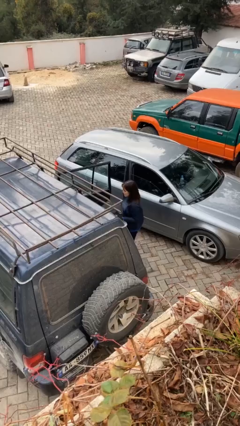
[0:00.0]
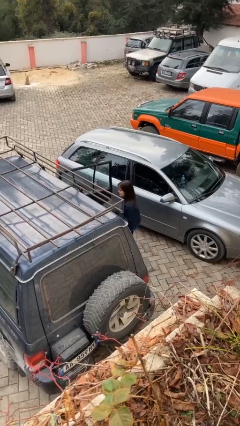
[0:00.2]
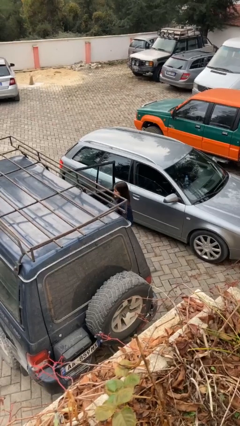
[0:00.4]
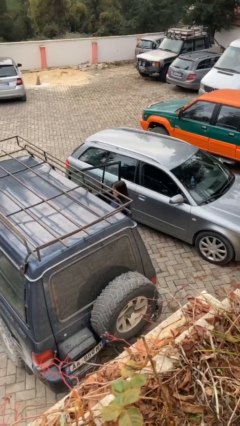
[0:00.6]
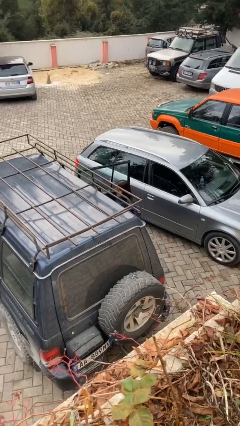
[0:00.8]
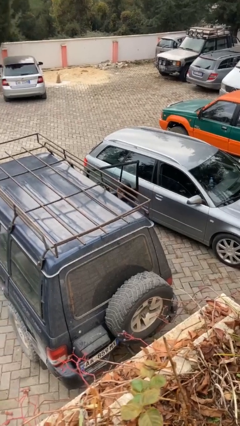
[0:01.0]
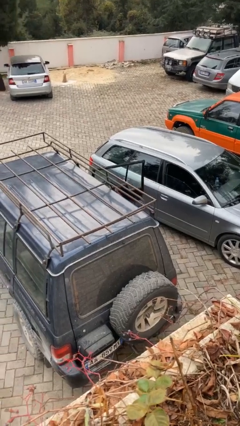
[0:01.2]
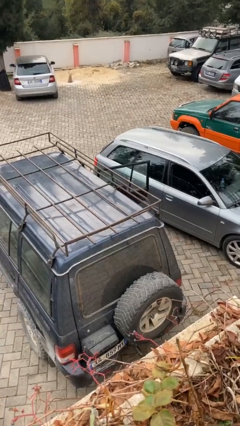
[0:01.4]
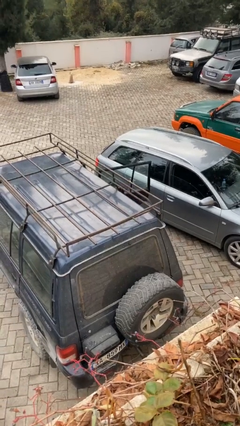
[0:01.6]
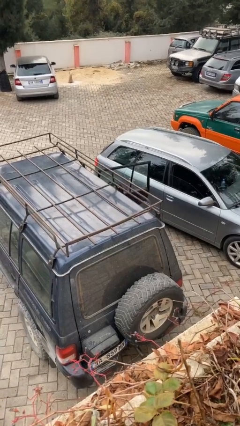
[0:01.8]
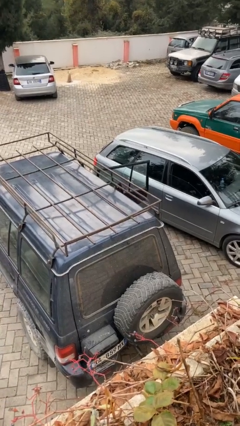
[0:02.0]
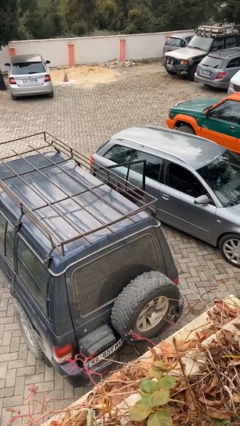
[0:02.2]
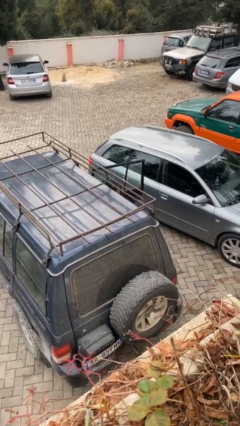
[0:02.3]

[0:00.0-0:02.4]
person loads car

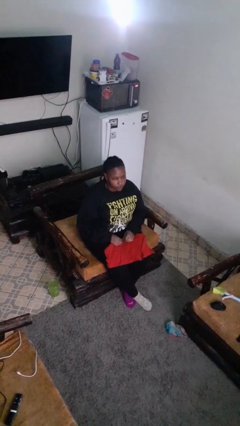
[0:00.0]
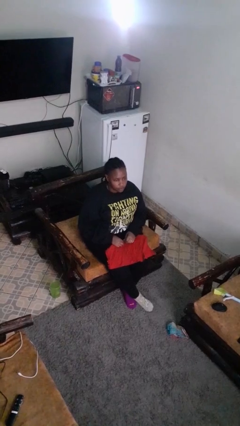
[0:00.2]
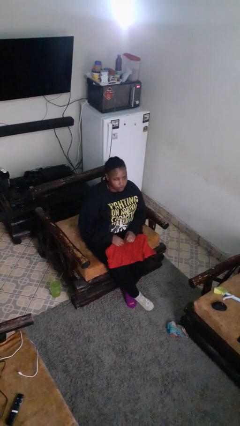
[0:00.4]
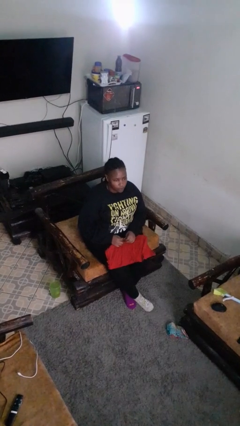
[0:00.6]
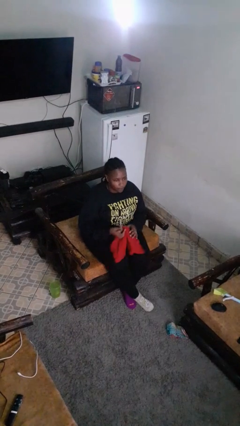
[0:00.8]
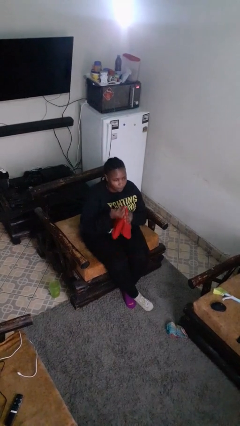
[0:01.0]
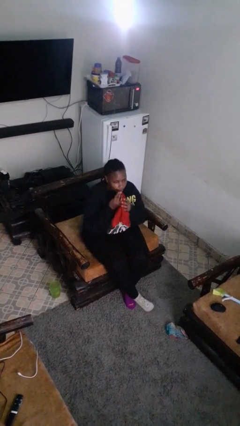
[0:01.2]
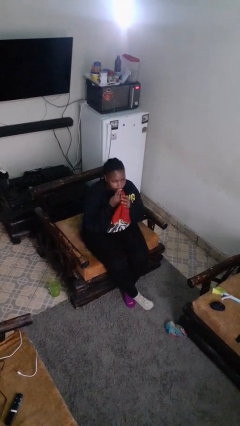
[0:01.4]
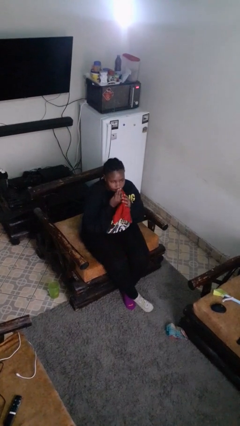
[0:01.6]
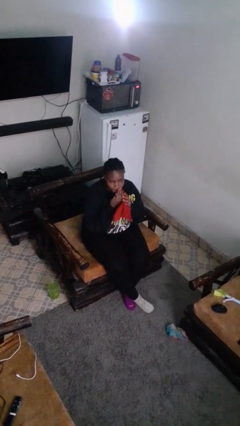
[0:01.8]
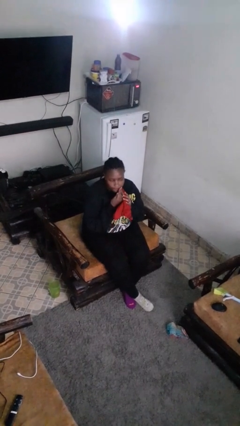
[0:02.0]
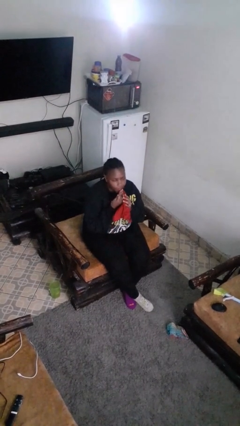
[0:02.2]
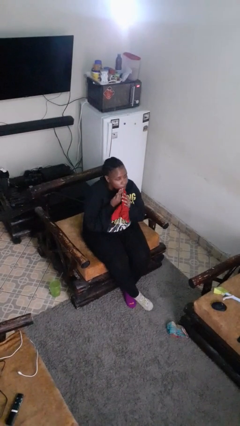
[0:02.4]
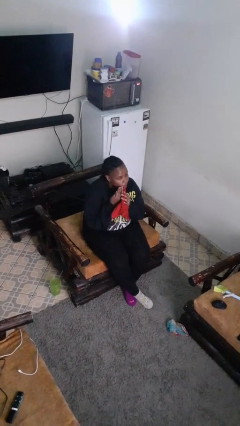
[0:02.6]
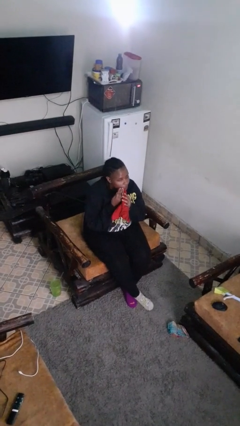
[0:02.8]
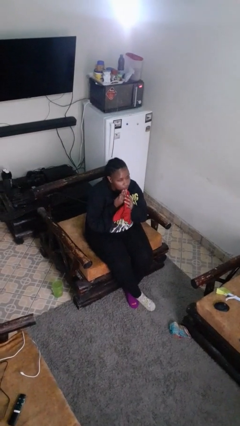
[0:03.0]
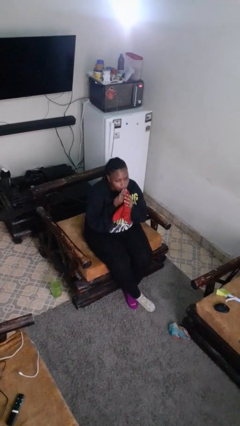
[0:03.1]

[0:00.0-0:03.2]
person wipes mouth with napkin

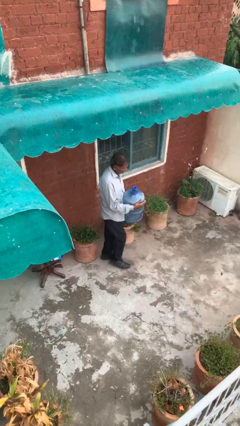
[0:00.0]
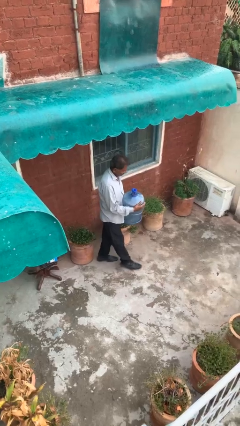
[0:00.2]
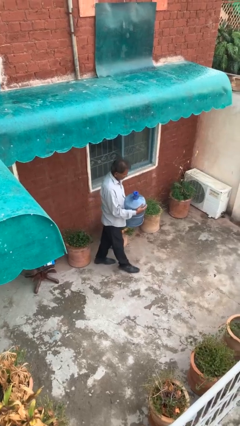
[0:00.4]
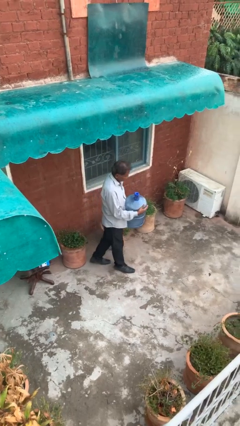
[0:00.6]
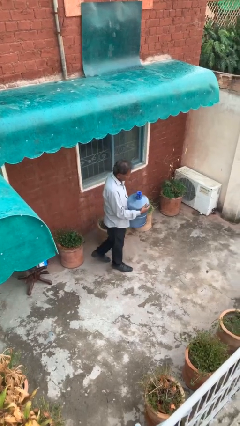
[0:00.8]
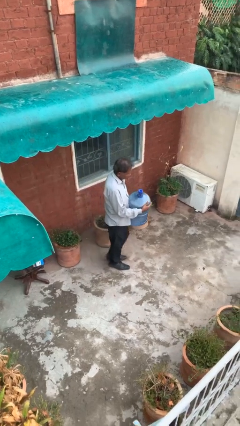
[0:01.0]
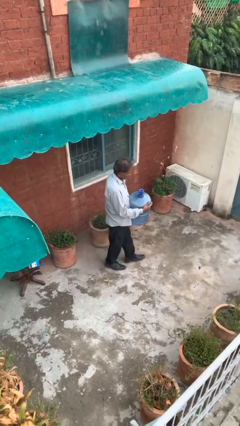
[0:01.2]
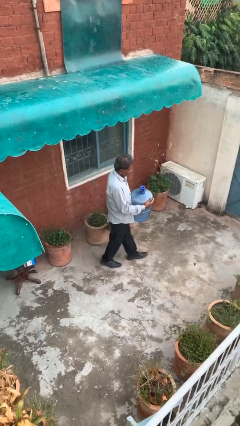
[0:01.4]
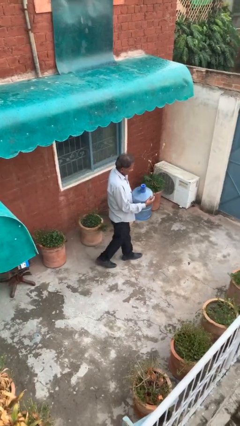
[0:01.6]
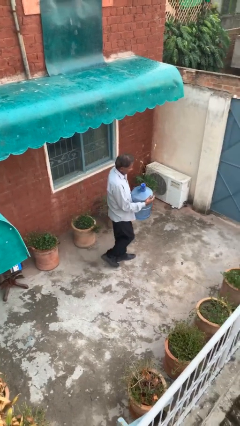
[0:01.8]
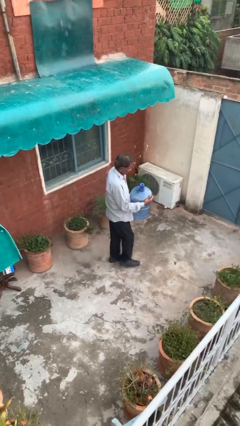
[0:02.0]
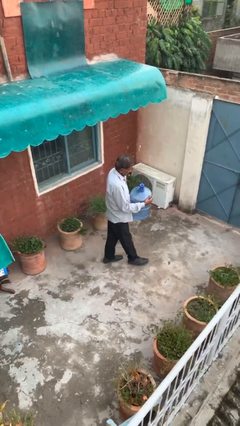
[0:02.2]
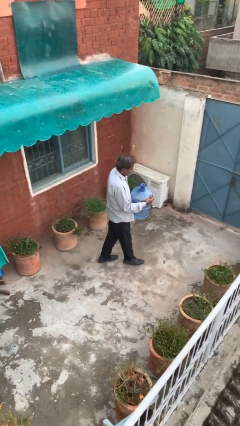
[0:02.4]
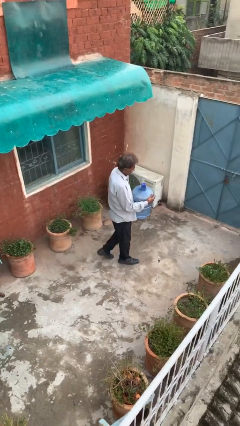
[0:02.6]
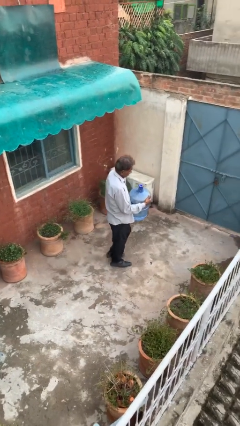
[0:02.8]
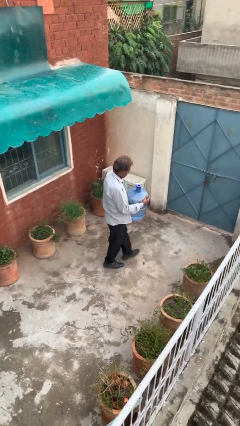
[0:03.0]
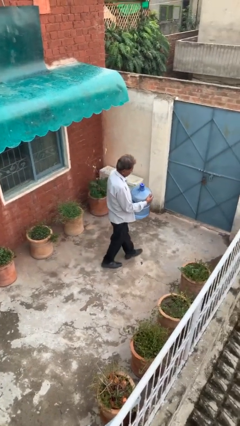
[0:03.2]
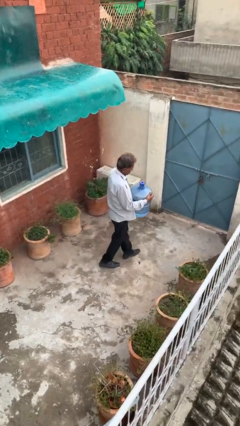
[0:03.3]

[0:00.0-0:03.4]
person carries heavy object

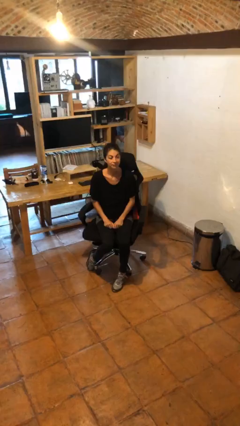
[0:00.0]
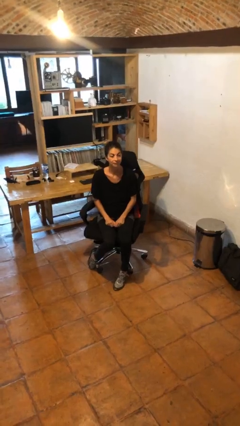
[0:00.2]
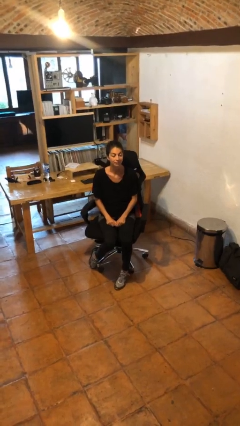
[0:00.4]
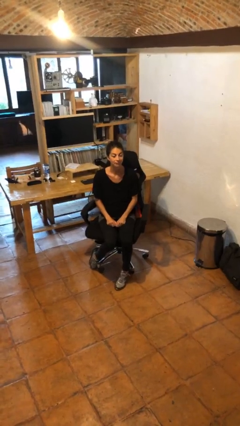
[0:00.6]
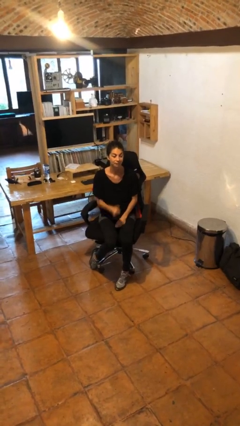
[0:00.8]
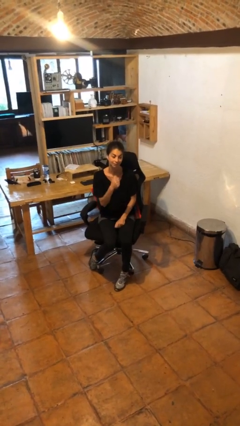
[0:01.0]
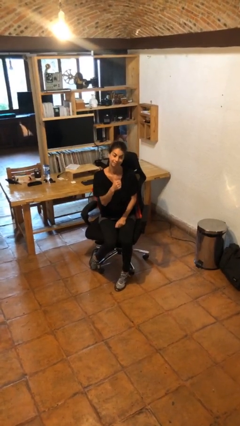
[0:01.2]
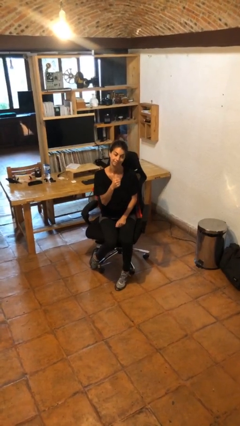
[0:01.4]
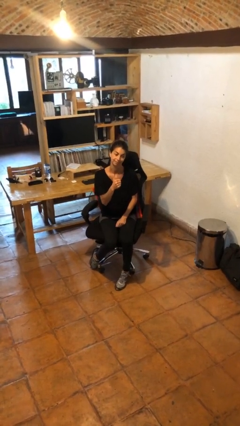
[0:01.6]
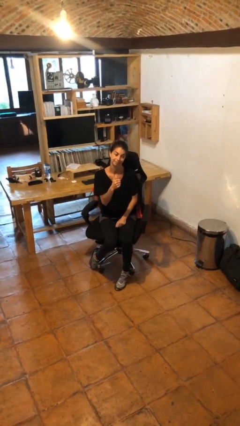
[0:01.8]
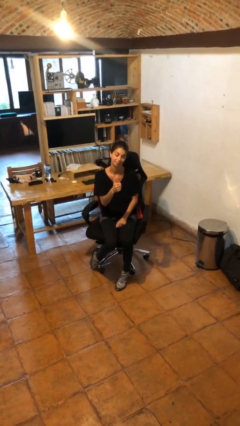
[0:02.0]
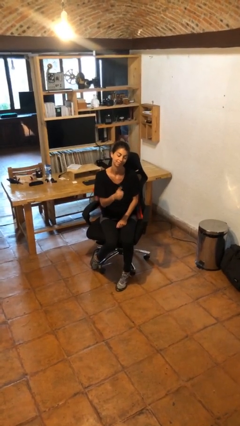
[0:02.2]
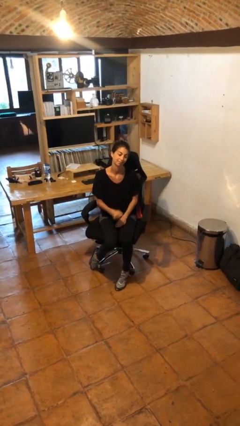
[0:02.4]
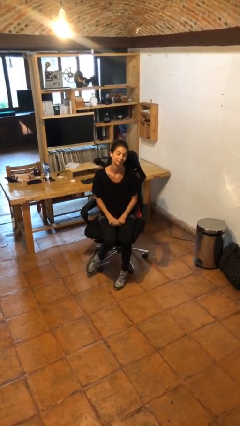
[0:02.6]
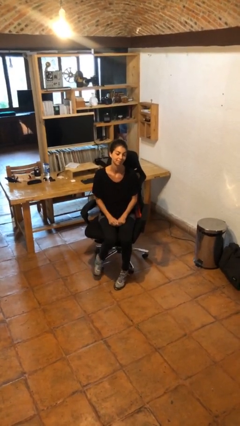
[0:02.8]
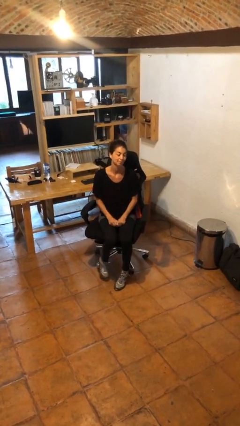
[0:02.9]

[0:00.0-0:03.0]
person gestures thumbs up

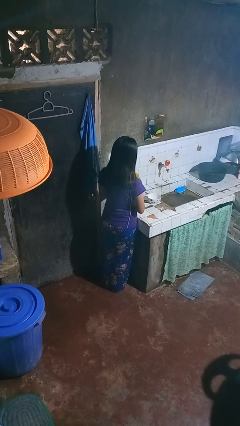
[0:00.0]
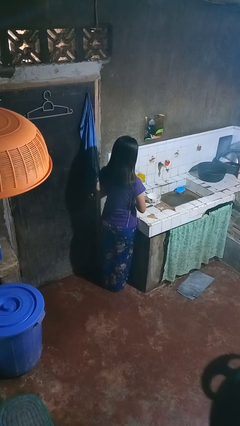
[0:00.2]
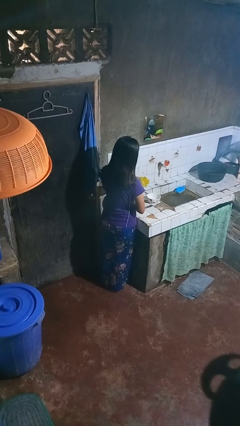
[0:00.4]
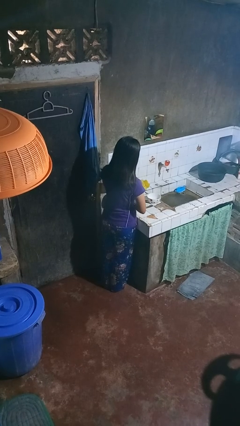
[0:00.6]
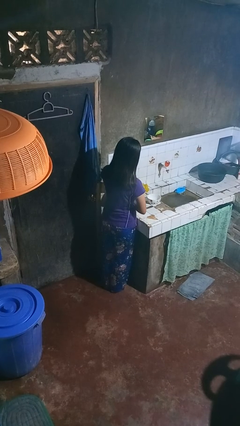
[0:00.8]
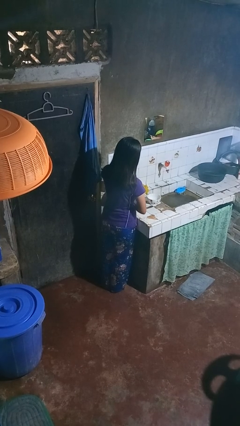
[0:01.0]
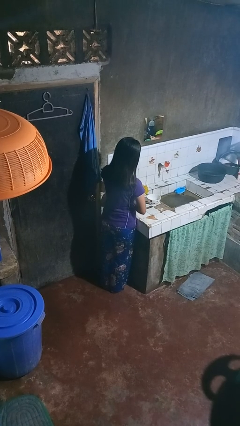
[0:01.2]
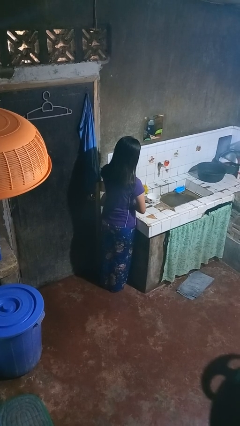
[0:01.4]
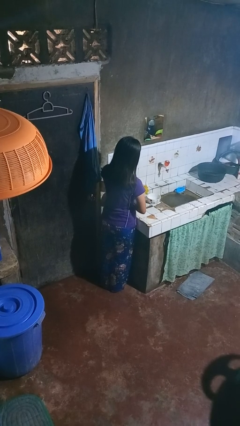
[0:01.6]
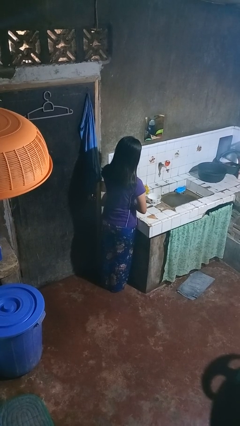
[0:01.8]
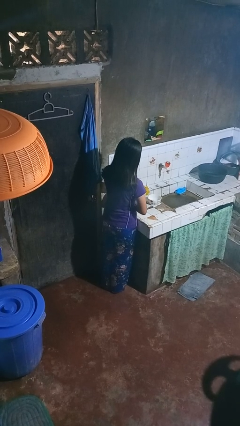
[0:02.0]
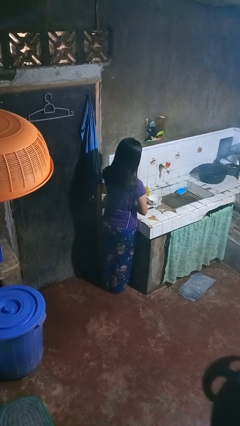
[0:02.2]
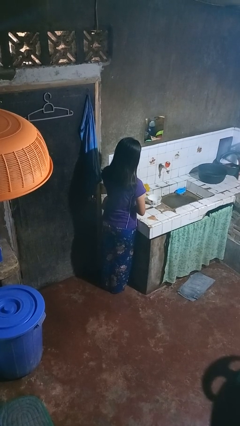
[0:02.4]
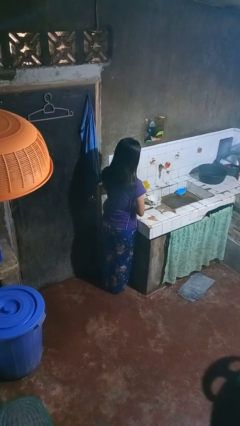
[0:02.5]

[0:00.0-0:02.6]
person pours into bowl

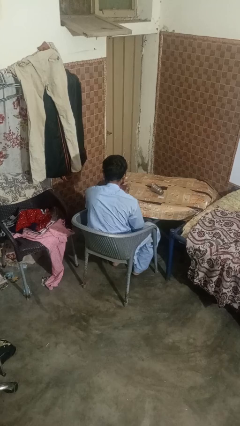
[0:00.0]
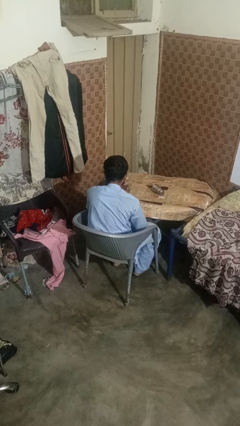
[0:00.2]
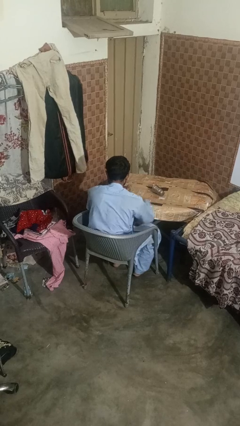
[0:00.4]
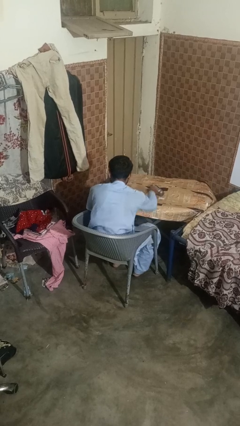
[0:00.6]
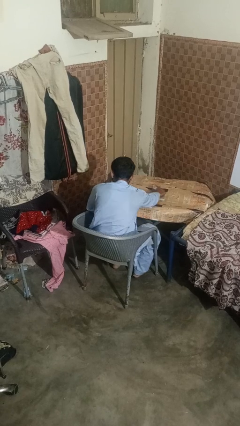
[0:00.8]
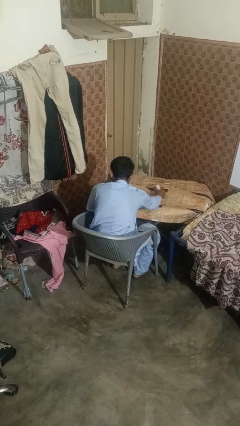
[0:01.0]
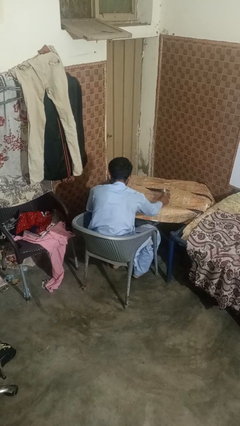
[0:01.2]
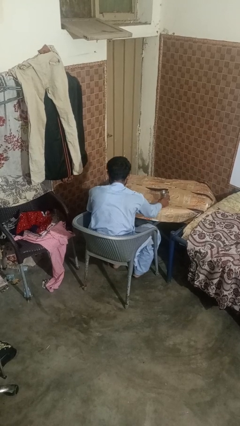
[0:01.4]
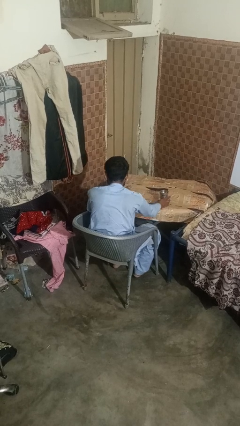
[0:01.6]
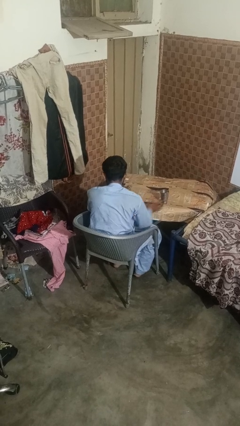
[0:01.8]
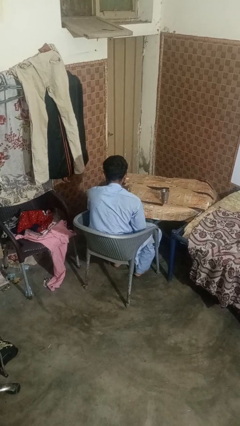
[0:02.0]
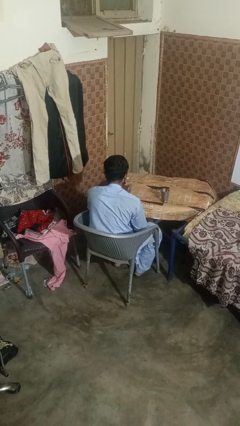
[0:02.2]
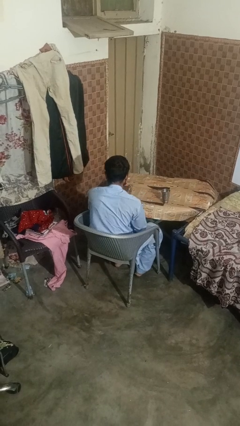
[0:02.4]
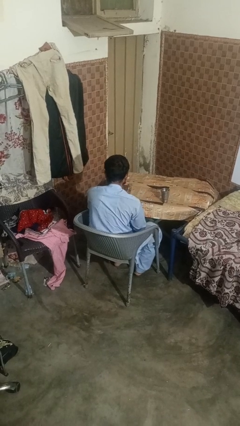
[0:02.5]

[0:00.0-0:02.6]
person sets upright glass
